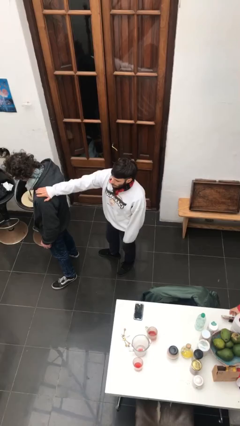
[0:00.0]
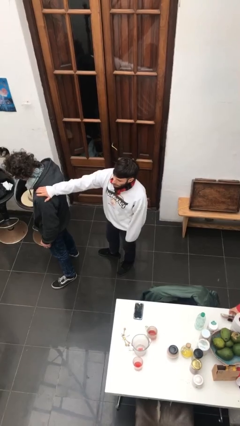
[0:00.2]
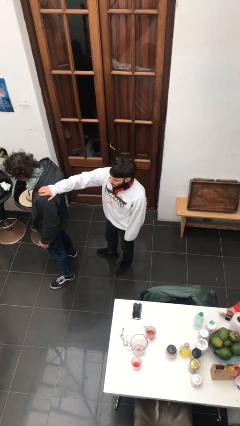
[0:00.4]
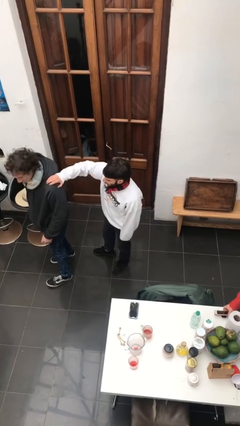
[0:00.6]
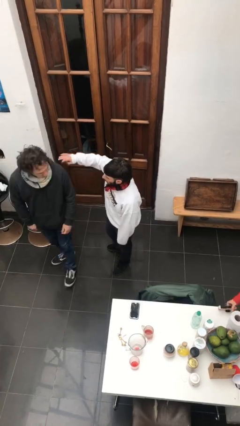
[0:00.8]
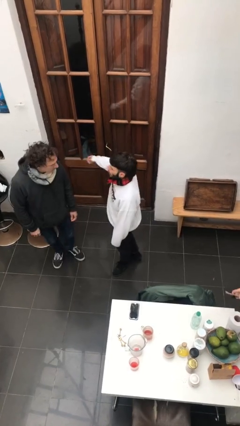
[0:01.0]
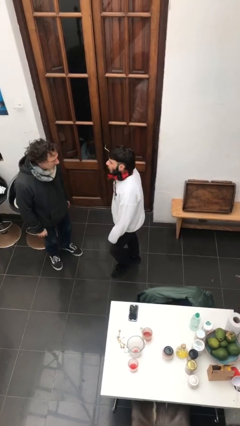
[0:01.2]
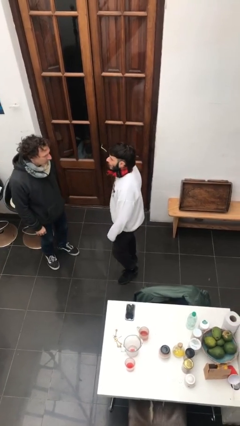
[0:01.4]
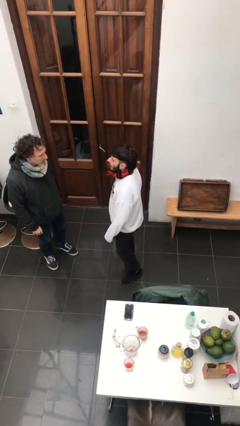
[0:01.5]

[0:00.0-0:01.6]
person spins person around

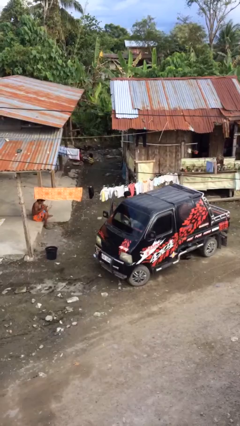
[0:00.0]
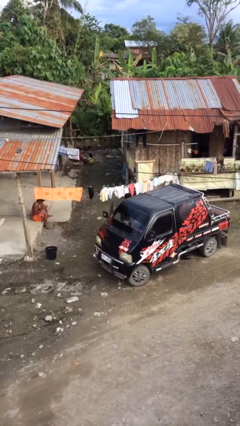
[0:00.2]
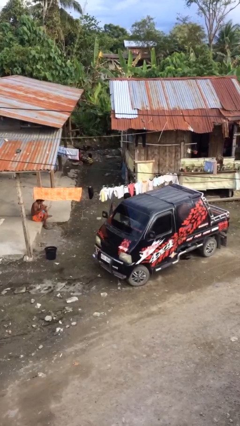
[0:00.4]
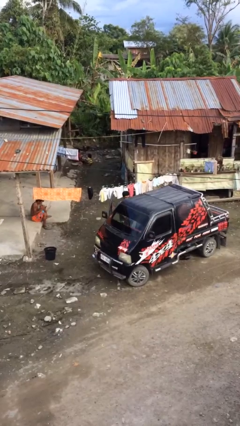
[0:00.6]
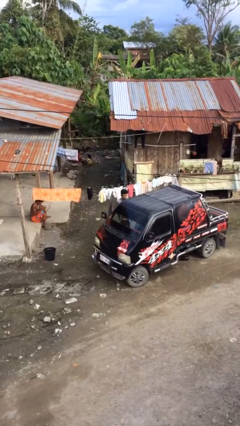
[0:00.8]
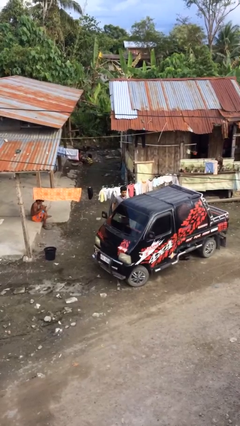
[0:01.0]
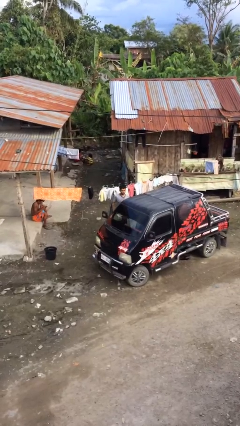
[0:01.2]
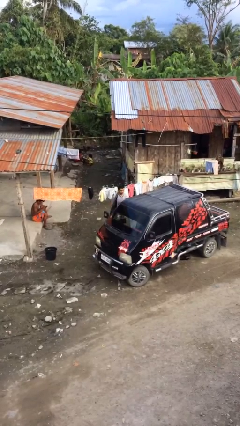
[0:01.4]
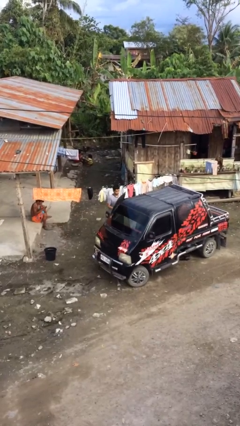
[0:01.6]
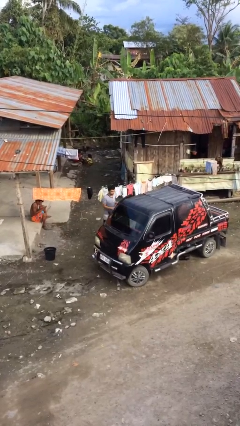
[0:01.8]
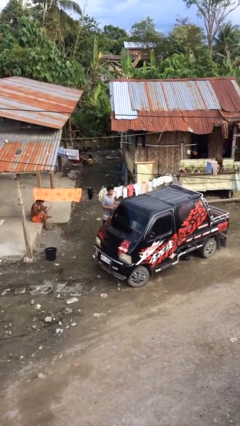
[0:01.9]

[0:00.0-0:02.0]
person unloads car

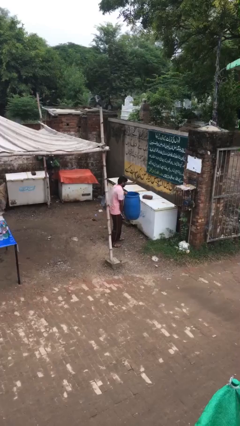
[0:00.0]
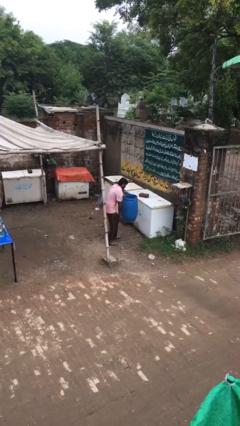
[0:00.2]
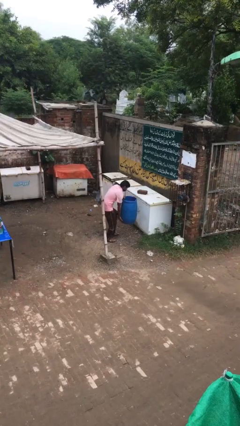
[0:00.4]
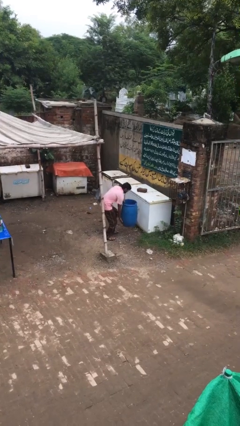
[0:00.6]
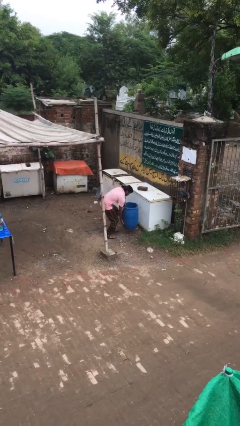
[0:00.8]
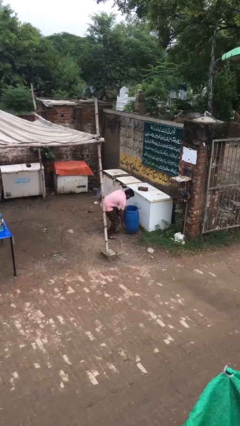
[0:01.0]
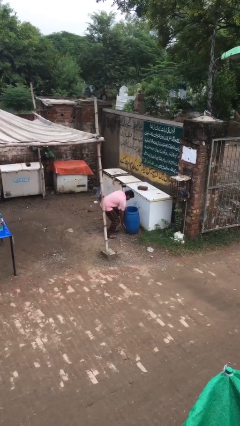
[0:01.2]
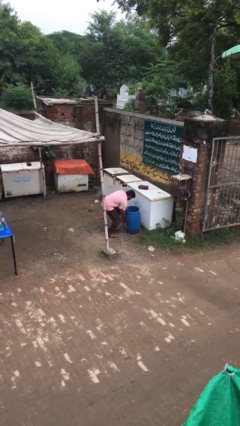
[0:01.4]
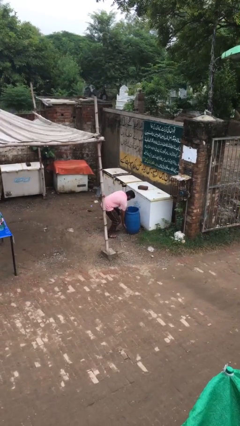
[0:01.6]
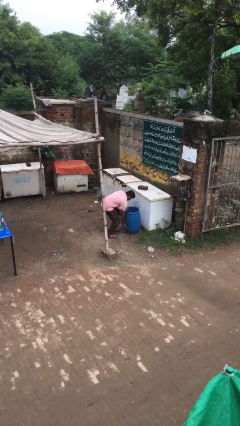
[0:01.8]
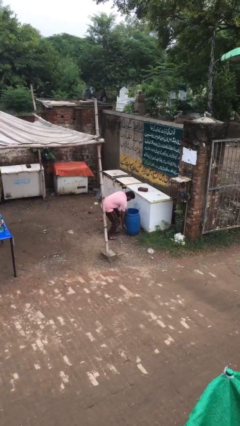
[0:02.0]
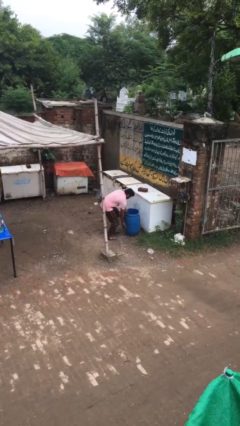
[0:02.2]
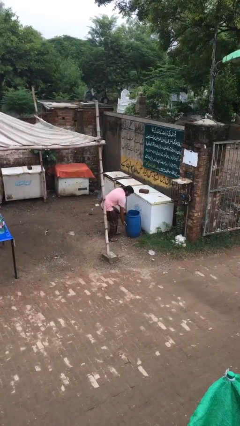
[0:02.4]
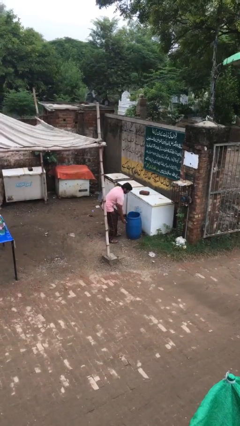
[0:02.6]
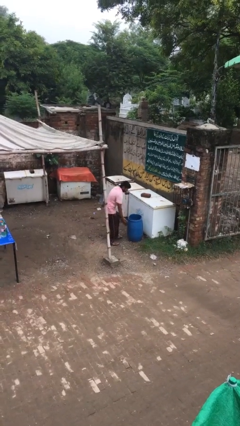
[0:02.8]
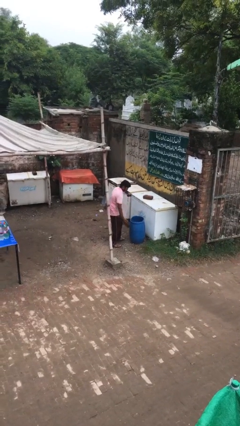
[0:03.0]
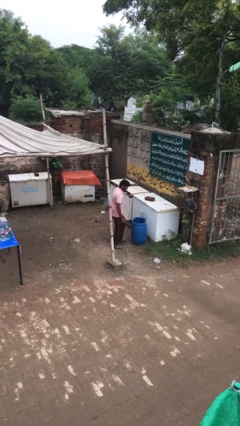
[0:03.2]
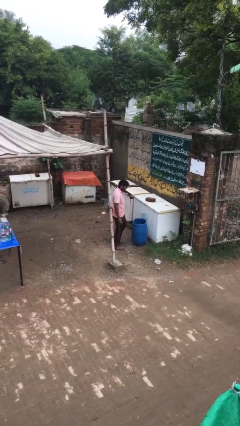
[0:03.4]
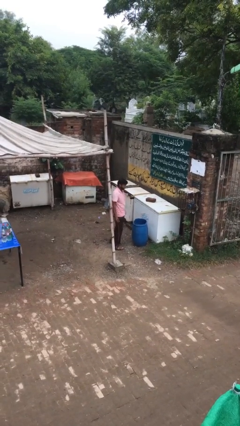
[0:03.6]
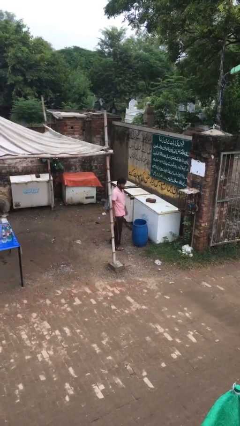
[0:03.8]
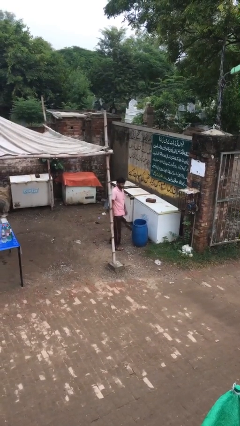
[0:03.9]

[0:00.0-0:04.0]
person puts down object on floor

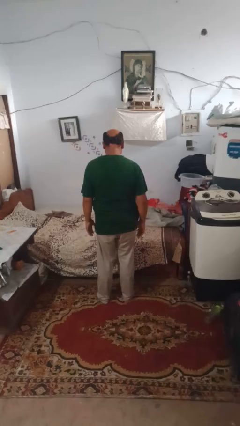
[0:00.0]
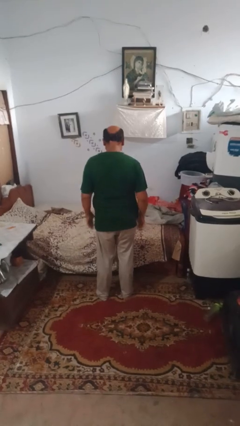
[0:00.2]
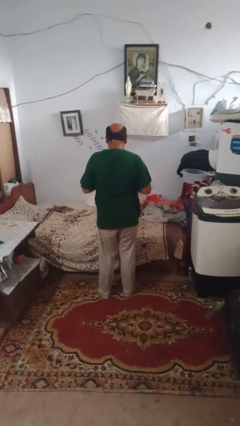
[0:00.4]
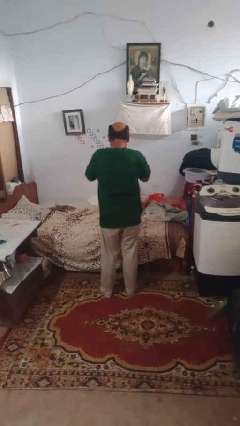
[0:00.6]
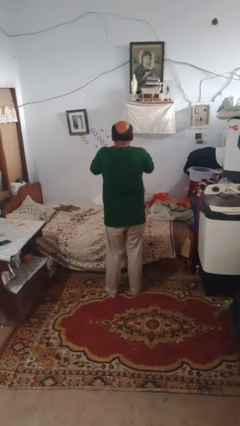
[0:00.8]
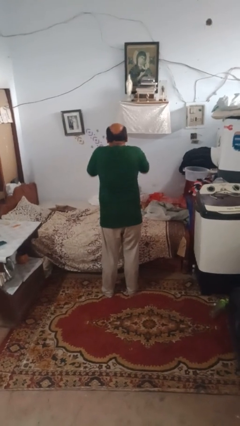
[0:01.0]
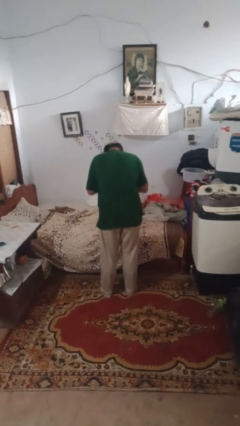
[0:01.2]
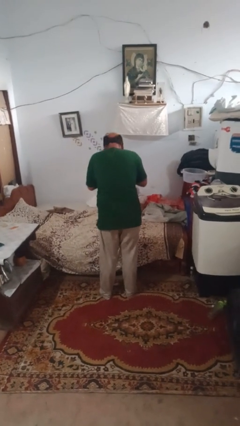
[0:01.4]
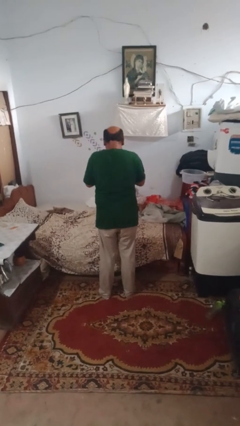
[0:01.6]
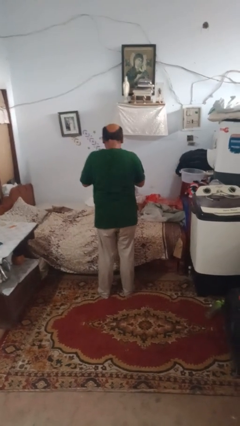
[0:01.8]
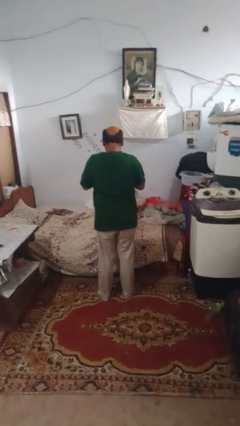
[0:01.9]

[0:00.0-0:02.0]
person sneezes into hand

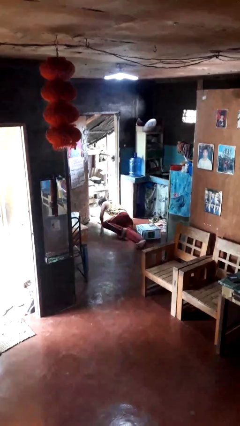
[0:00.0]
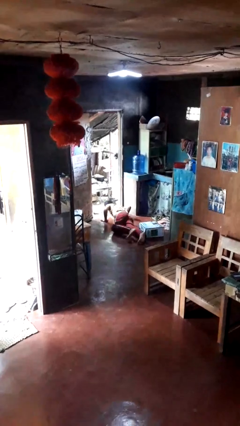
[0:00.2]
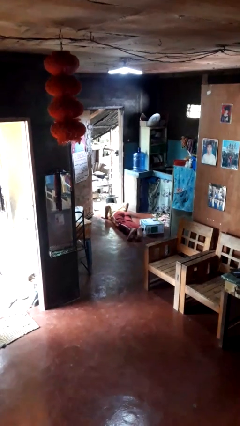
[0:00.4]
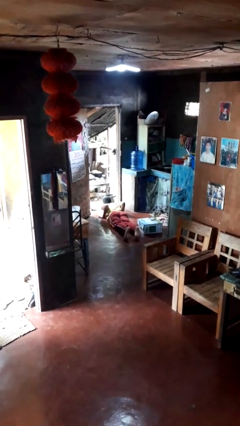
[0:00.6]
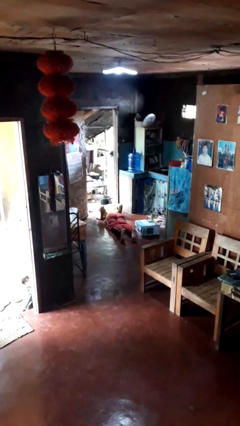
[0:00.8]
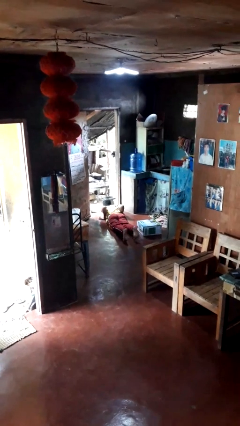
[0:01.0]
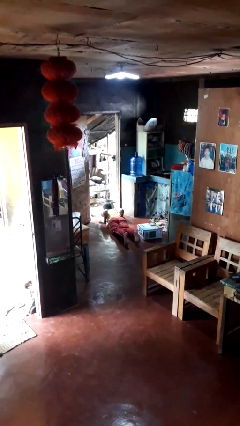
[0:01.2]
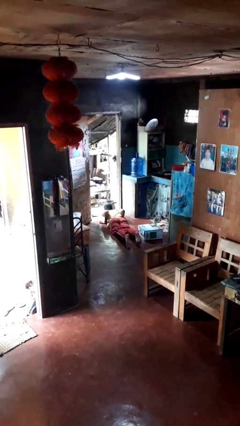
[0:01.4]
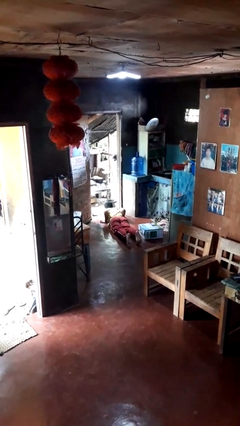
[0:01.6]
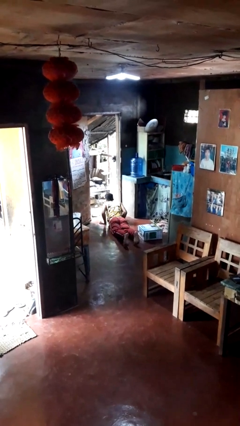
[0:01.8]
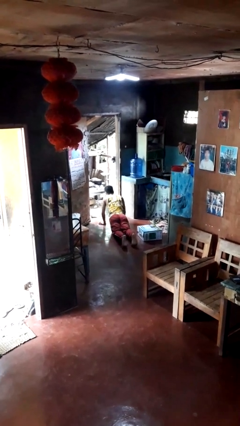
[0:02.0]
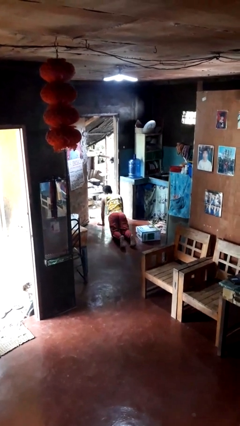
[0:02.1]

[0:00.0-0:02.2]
person lies down on floor

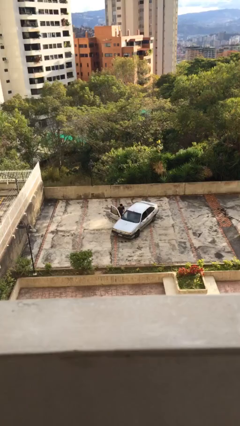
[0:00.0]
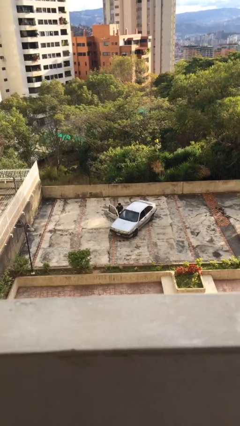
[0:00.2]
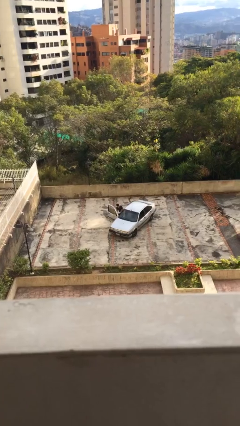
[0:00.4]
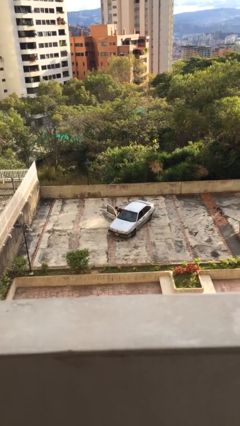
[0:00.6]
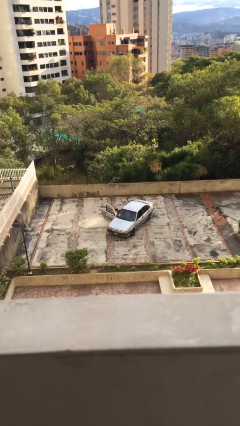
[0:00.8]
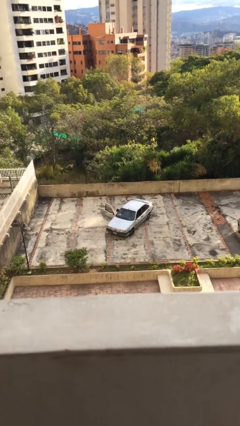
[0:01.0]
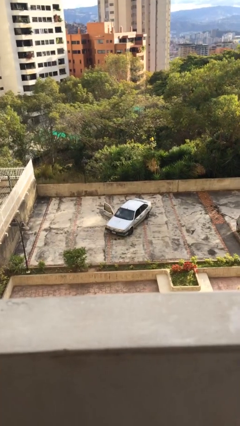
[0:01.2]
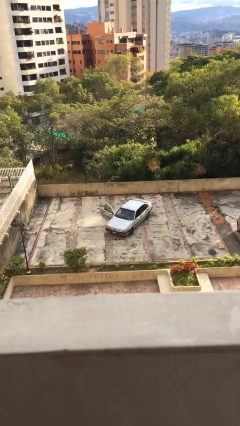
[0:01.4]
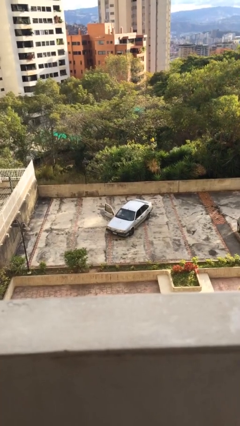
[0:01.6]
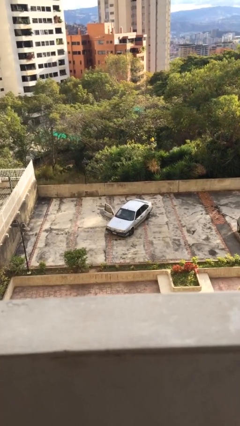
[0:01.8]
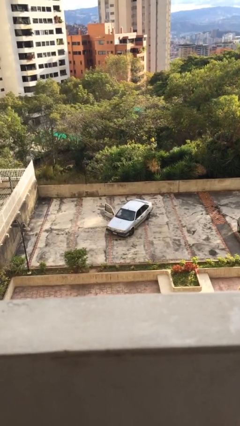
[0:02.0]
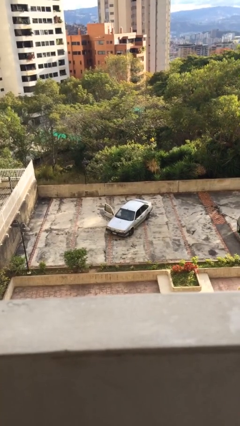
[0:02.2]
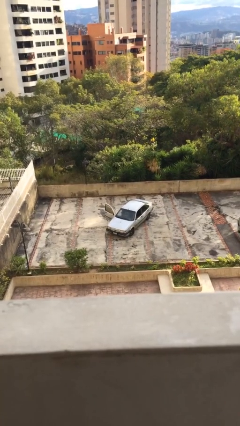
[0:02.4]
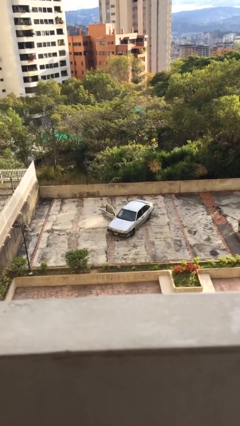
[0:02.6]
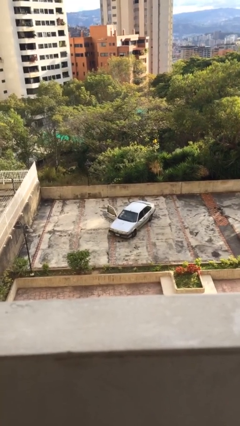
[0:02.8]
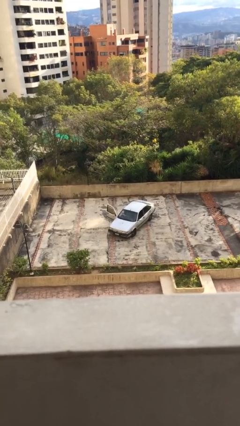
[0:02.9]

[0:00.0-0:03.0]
person enters car

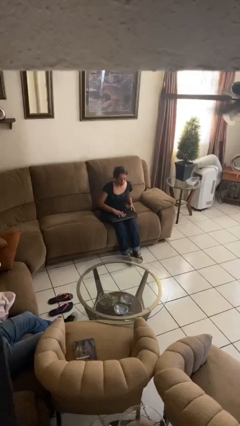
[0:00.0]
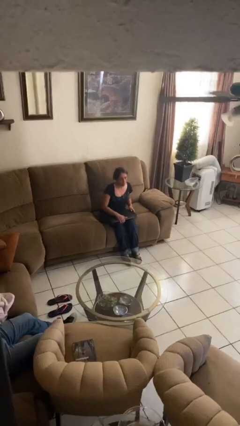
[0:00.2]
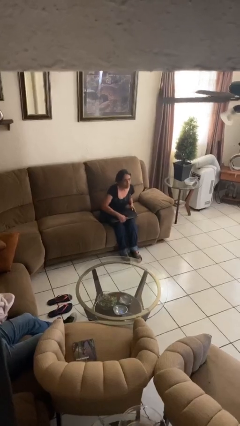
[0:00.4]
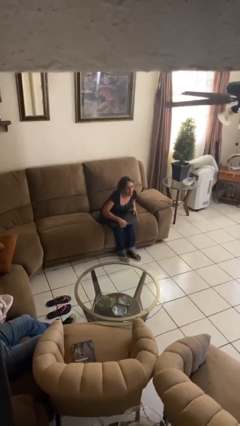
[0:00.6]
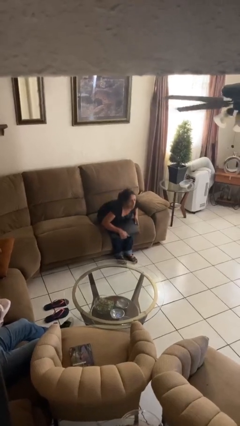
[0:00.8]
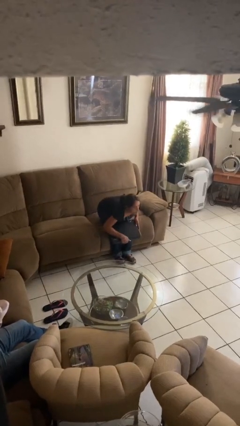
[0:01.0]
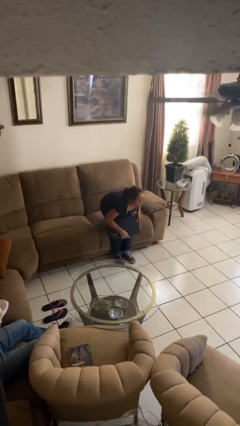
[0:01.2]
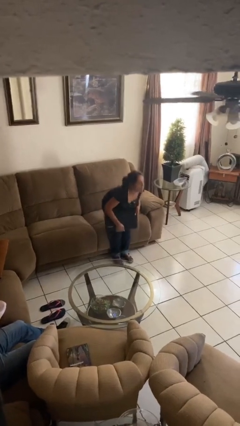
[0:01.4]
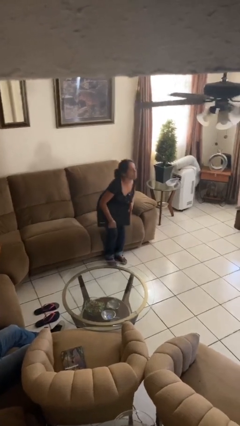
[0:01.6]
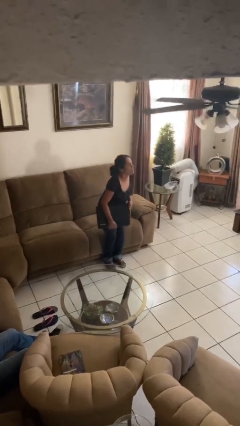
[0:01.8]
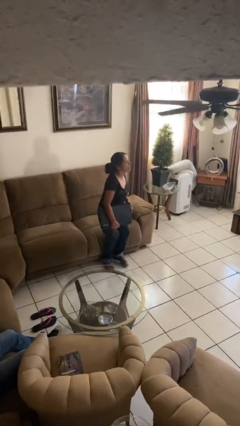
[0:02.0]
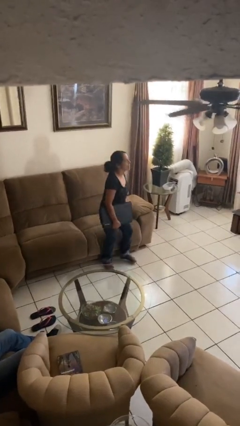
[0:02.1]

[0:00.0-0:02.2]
person stands up
